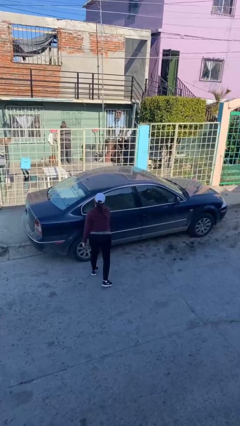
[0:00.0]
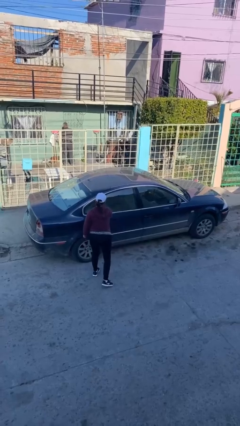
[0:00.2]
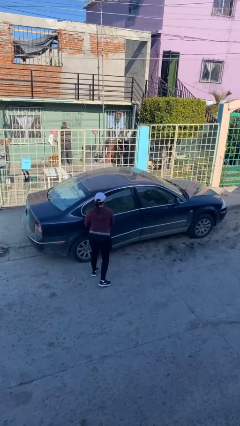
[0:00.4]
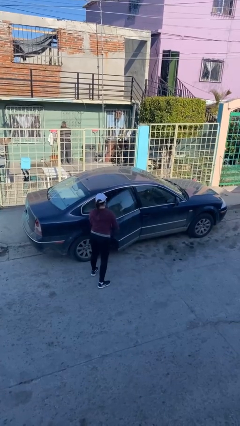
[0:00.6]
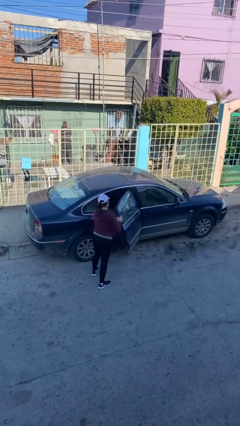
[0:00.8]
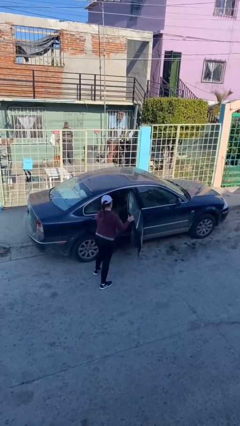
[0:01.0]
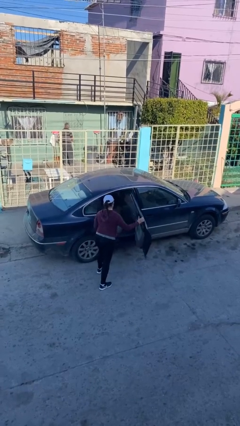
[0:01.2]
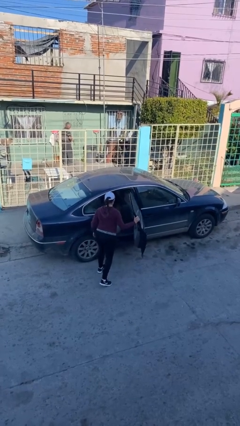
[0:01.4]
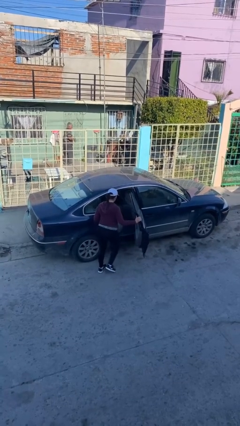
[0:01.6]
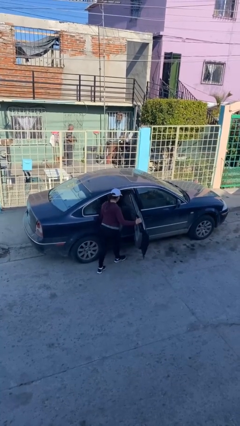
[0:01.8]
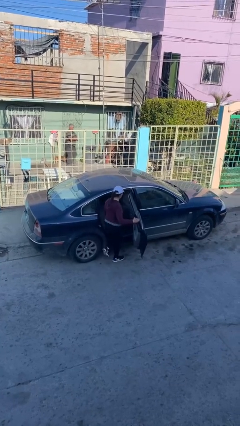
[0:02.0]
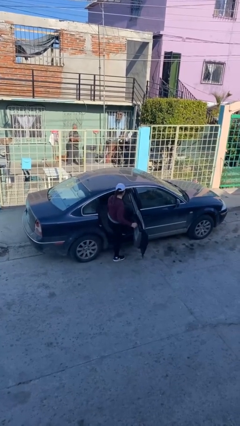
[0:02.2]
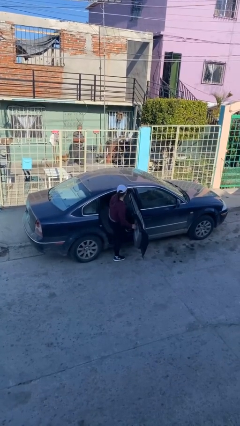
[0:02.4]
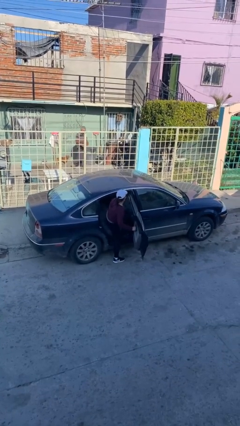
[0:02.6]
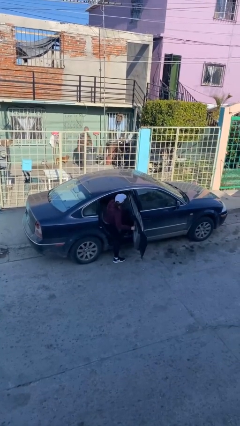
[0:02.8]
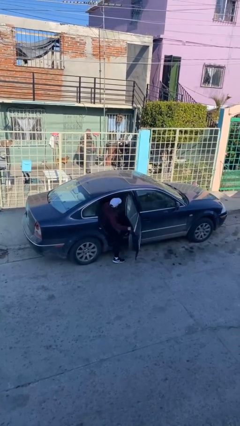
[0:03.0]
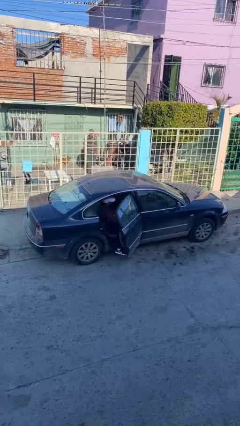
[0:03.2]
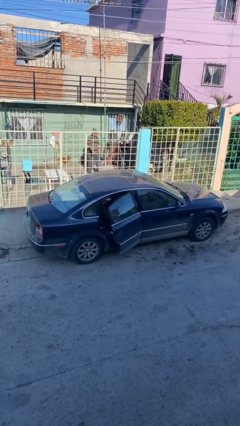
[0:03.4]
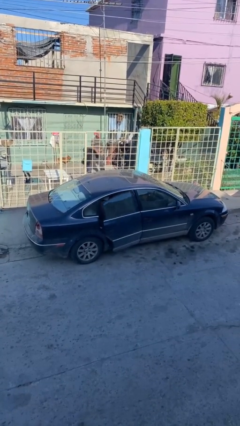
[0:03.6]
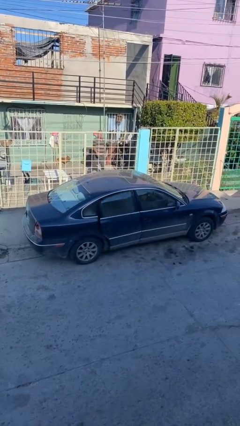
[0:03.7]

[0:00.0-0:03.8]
car picks up person

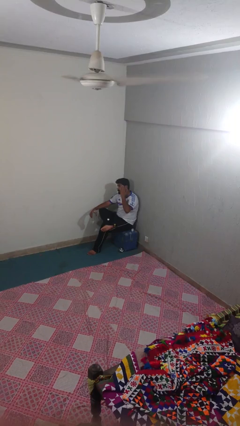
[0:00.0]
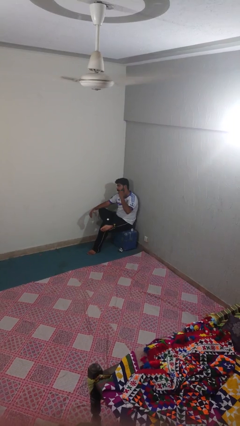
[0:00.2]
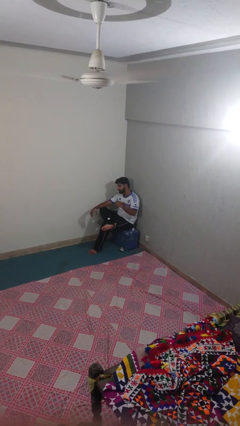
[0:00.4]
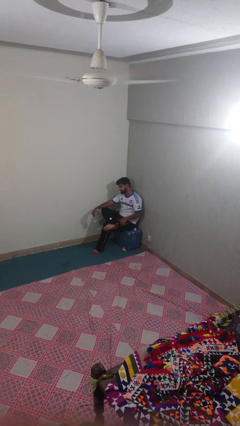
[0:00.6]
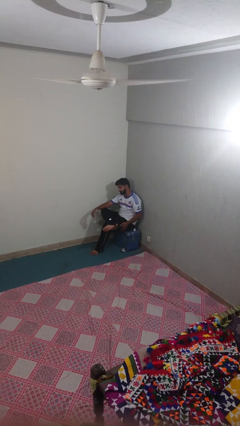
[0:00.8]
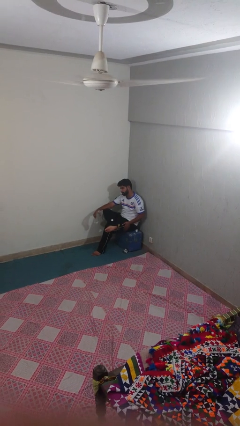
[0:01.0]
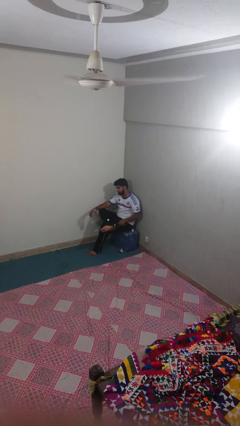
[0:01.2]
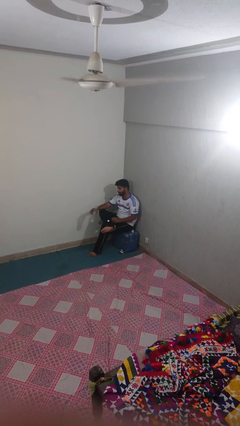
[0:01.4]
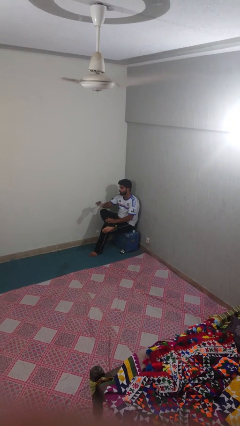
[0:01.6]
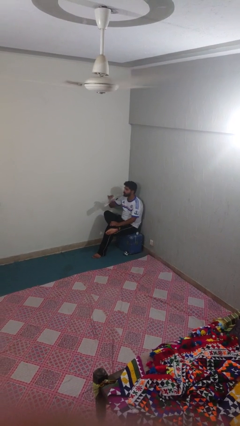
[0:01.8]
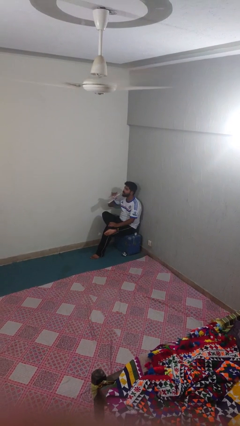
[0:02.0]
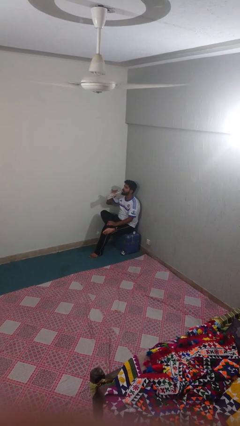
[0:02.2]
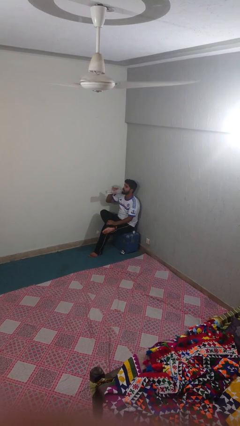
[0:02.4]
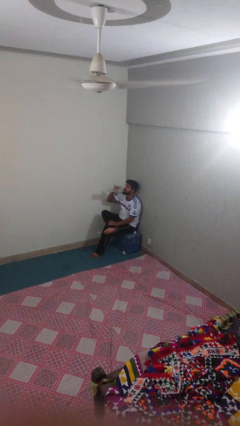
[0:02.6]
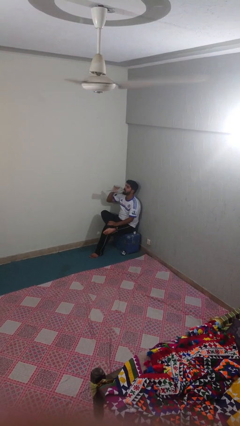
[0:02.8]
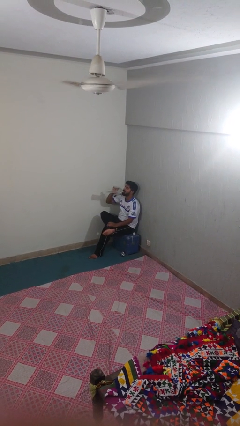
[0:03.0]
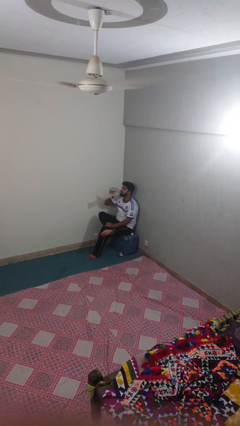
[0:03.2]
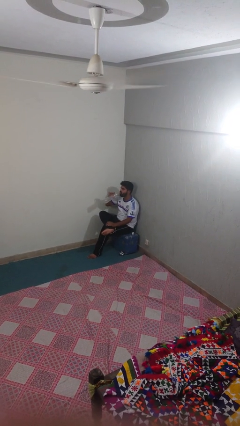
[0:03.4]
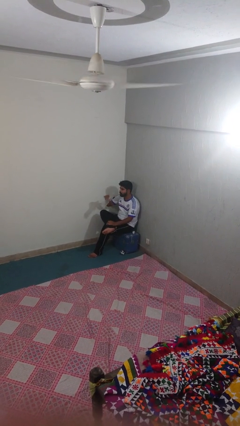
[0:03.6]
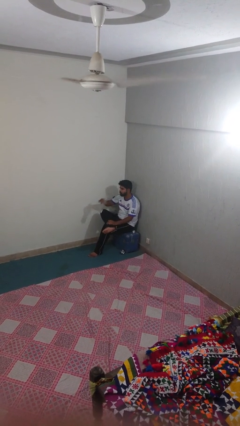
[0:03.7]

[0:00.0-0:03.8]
person drinks from bottle

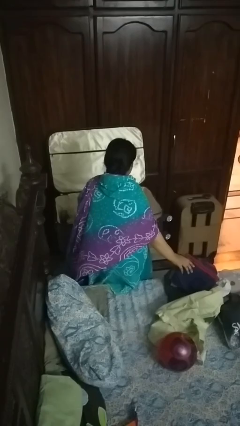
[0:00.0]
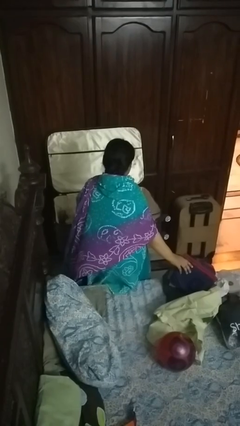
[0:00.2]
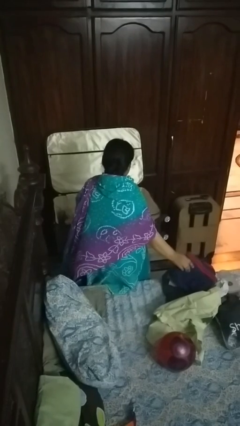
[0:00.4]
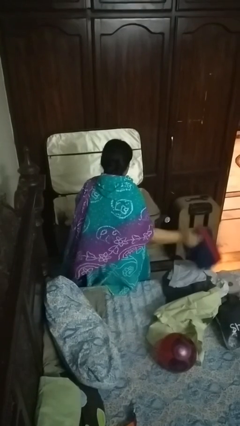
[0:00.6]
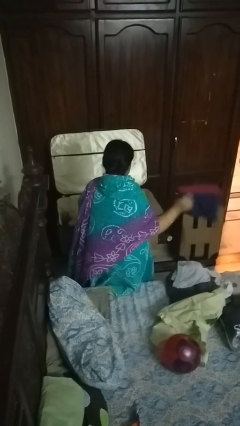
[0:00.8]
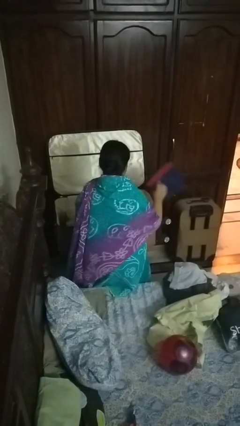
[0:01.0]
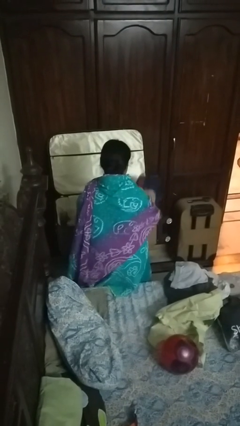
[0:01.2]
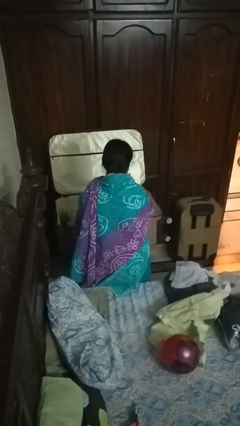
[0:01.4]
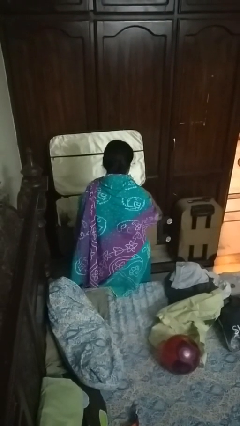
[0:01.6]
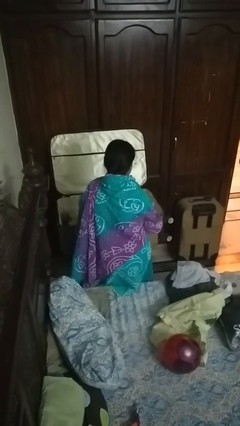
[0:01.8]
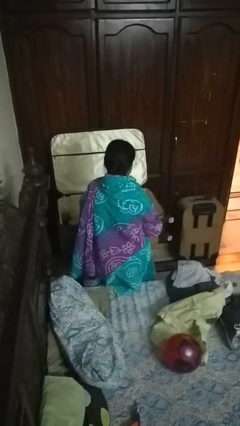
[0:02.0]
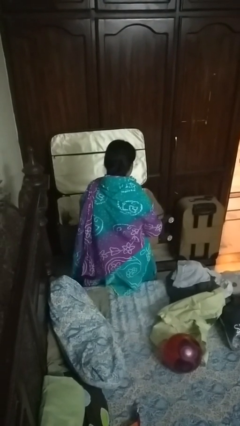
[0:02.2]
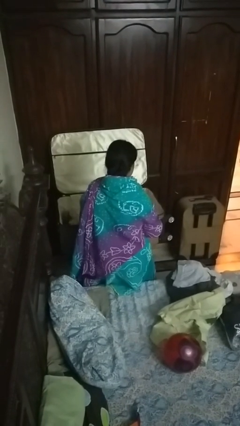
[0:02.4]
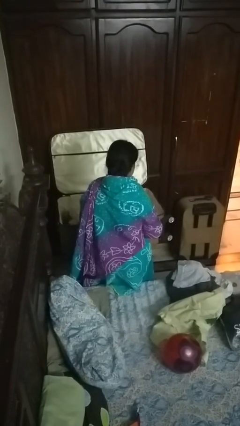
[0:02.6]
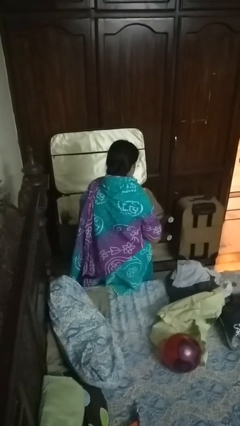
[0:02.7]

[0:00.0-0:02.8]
person loads clothes into suitcase

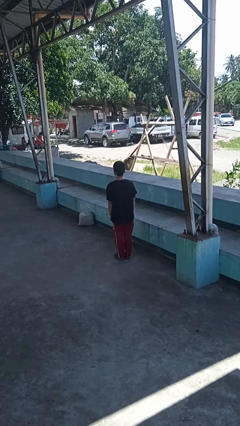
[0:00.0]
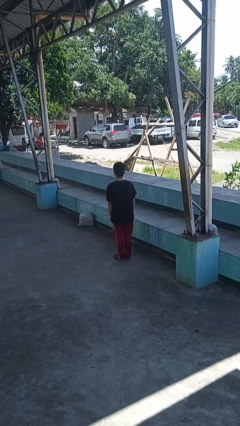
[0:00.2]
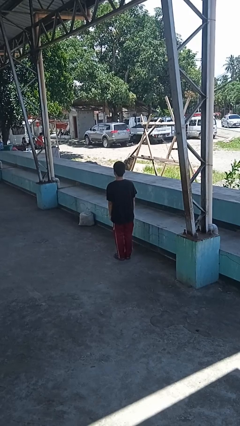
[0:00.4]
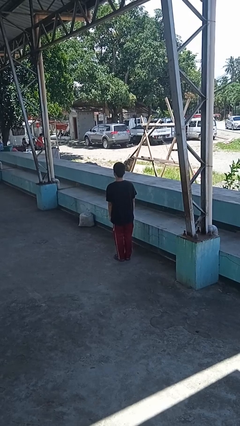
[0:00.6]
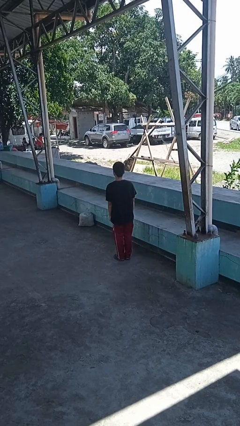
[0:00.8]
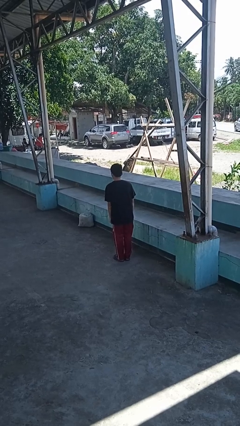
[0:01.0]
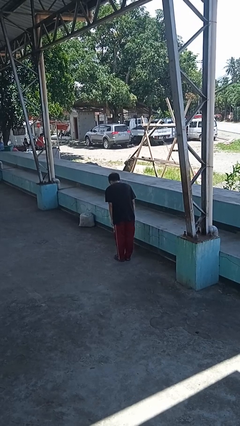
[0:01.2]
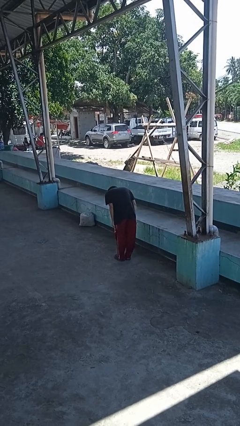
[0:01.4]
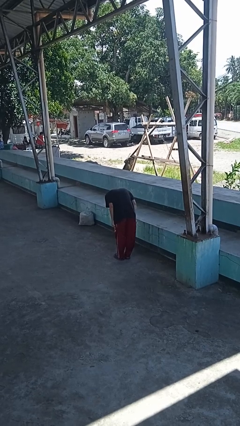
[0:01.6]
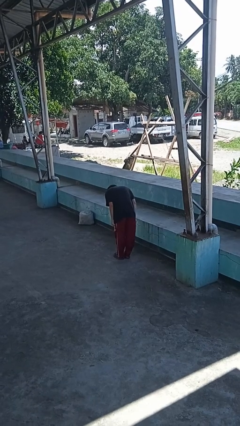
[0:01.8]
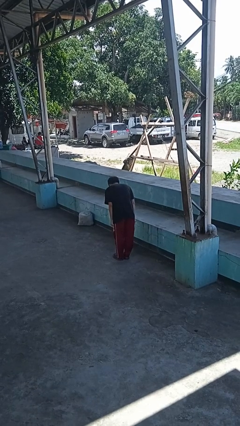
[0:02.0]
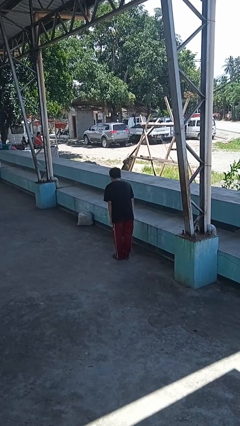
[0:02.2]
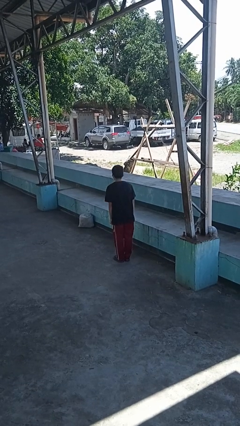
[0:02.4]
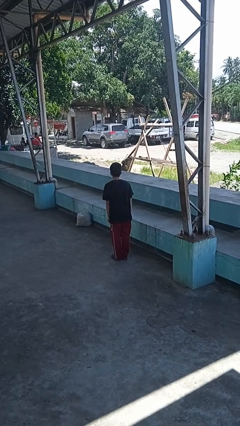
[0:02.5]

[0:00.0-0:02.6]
person bows

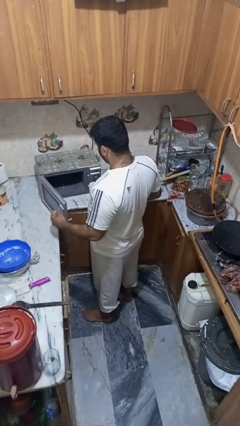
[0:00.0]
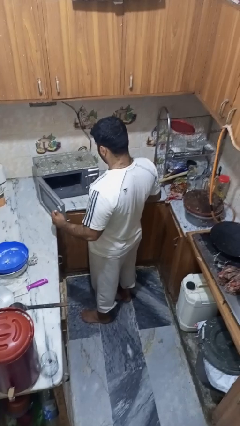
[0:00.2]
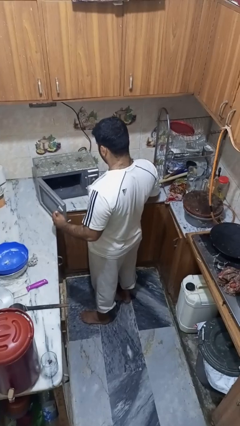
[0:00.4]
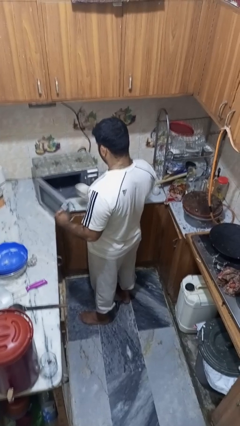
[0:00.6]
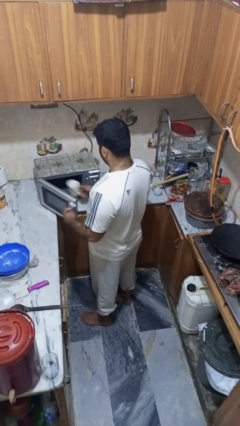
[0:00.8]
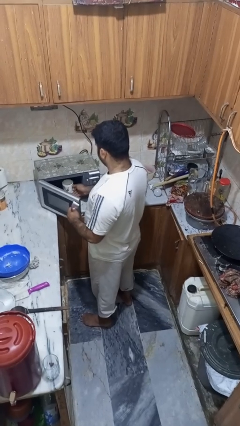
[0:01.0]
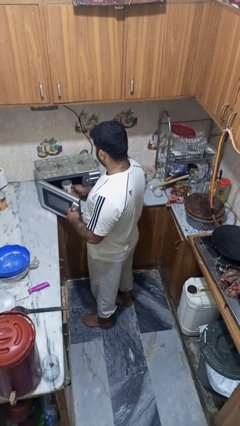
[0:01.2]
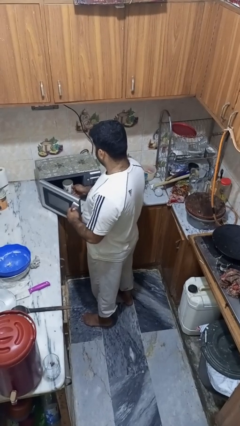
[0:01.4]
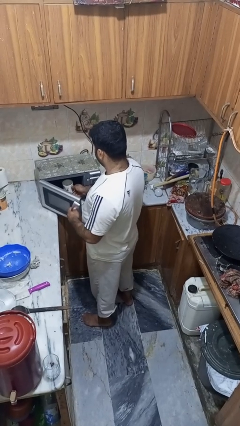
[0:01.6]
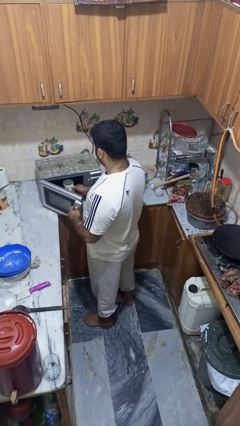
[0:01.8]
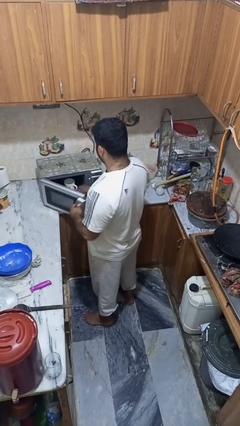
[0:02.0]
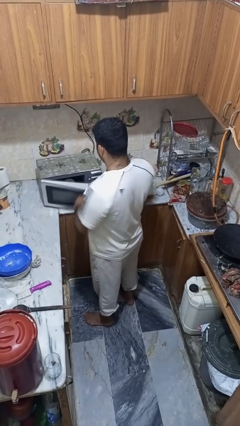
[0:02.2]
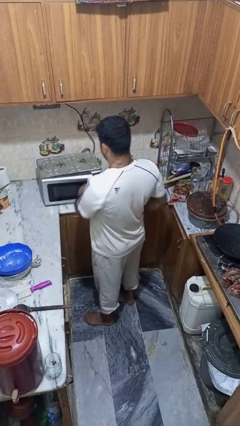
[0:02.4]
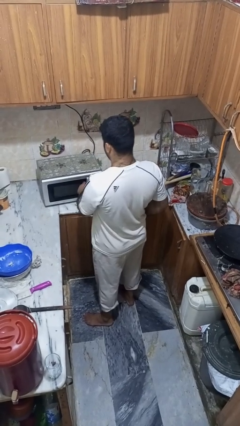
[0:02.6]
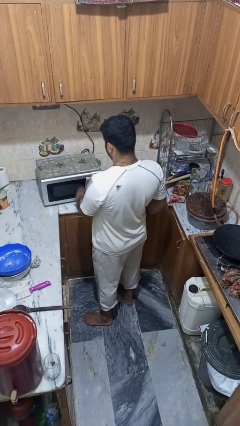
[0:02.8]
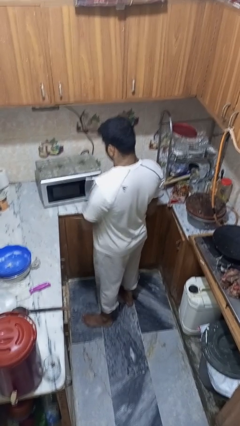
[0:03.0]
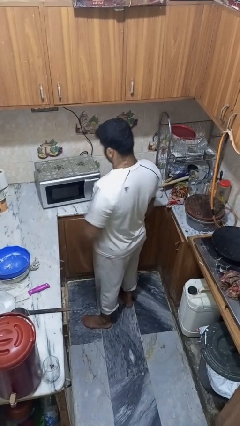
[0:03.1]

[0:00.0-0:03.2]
person puts object into microwave

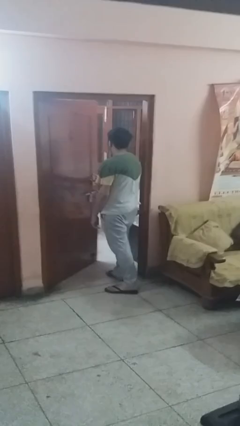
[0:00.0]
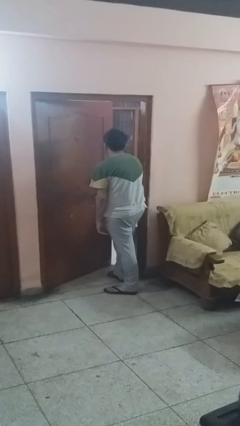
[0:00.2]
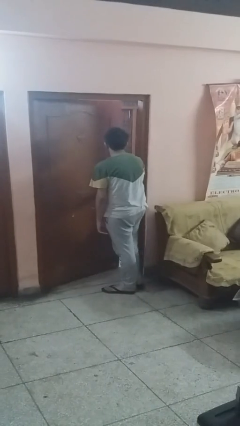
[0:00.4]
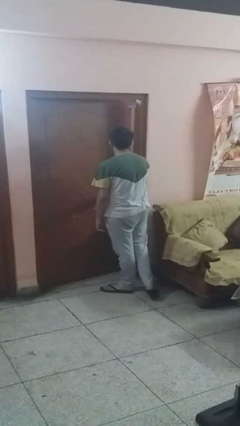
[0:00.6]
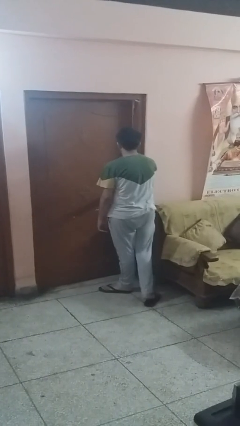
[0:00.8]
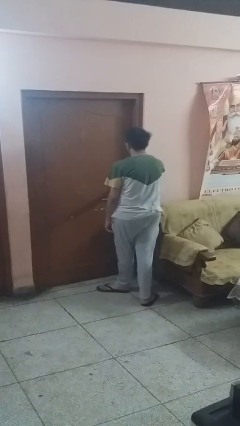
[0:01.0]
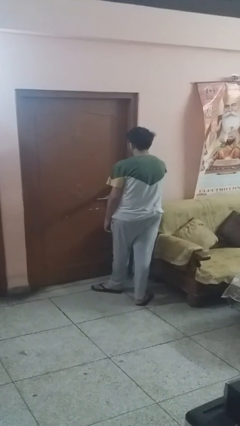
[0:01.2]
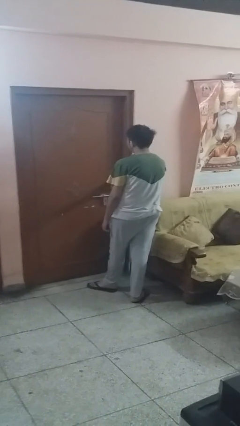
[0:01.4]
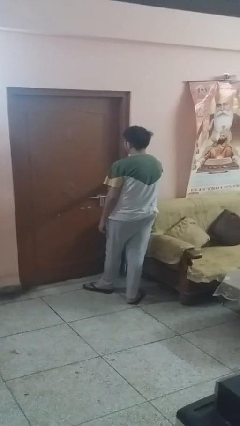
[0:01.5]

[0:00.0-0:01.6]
person closes facility door
